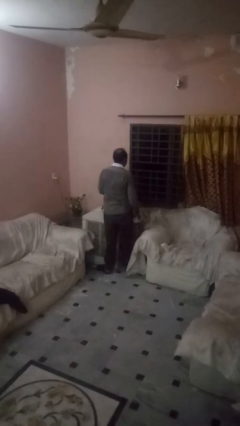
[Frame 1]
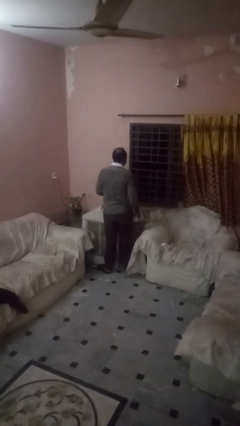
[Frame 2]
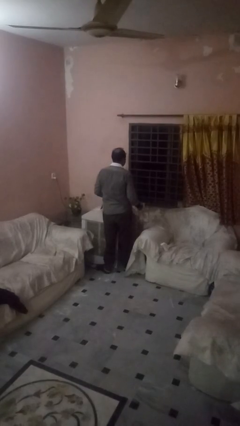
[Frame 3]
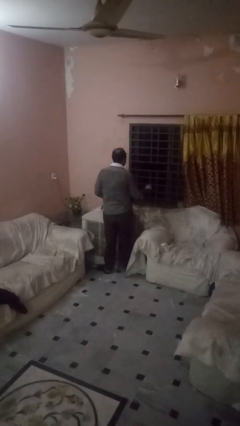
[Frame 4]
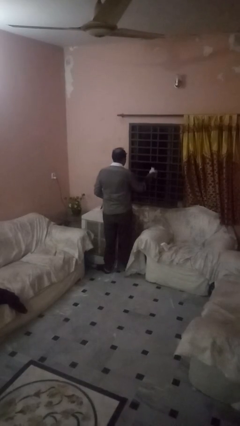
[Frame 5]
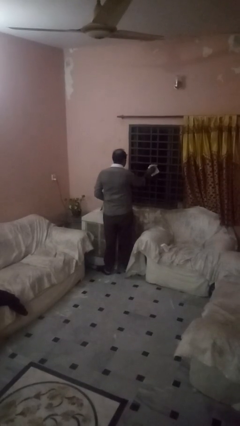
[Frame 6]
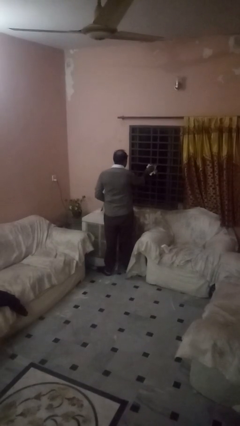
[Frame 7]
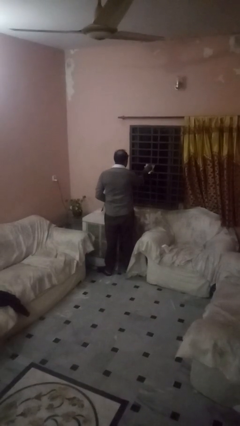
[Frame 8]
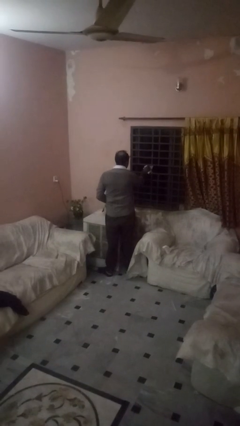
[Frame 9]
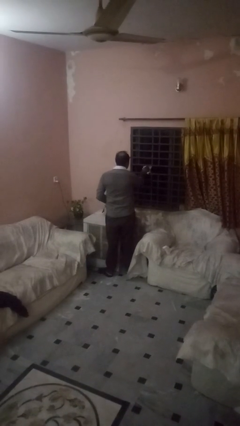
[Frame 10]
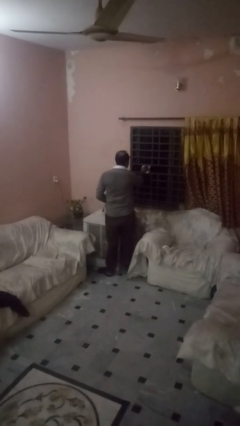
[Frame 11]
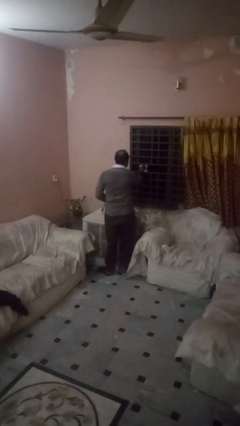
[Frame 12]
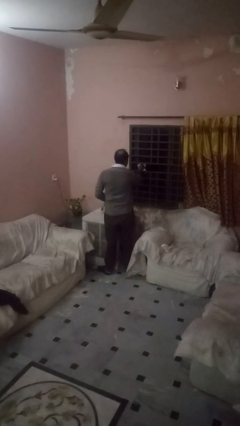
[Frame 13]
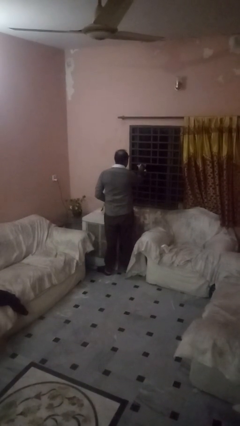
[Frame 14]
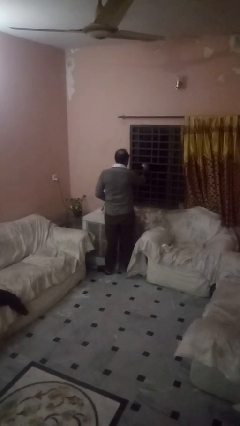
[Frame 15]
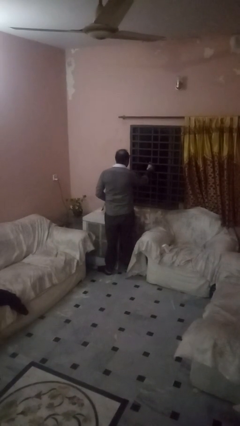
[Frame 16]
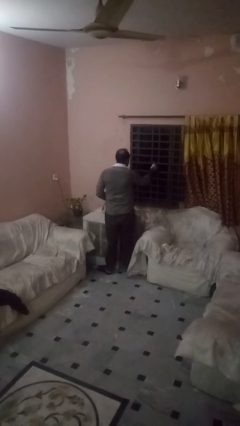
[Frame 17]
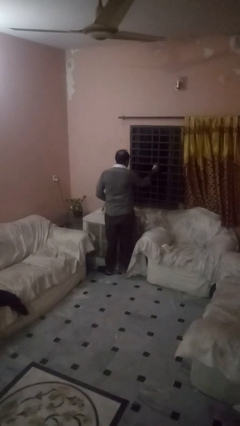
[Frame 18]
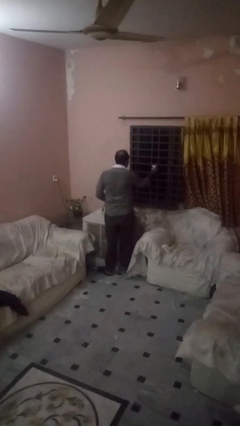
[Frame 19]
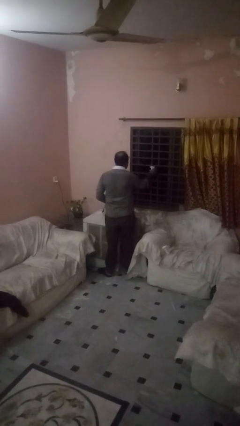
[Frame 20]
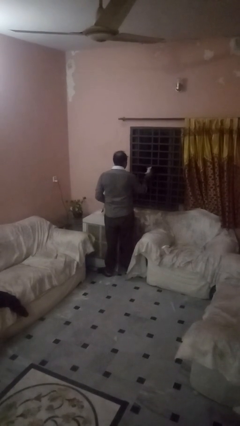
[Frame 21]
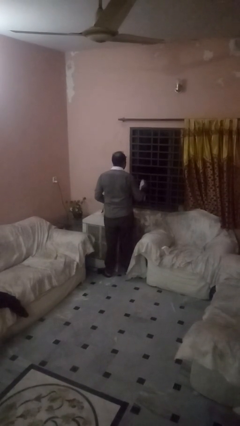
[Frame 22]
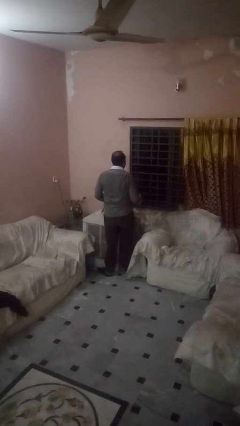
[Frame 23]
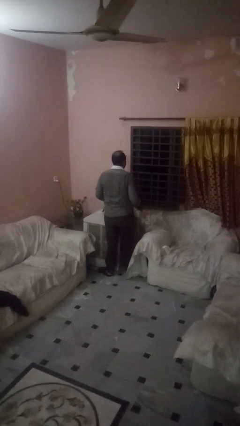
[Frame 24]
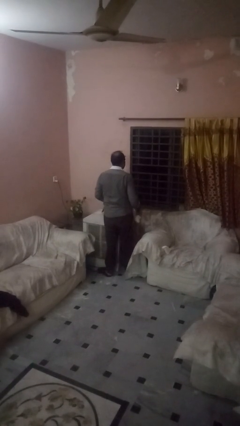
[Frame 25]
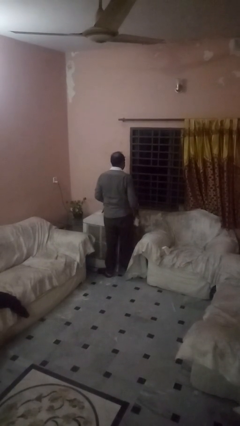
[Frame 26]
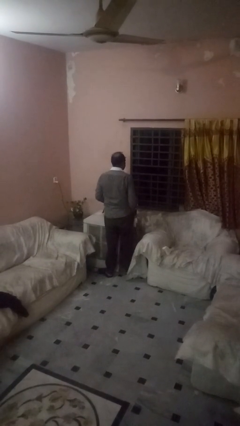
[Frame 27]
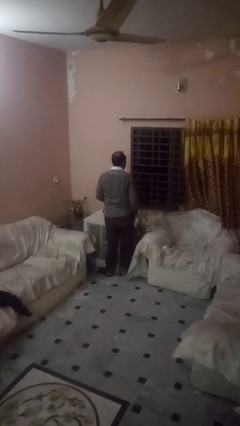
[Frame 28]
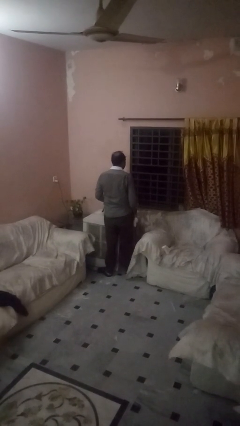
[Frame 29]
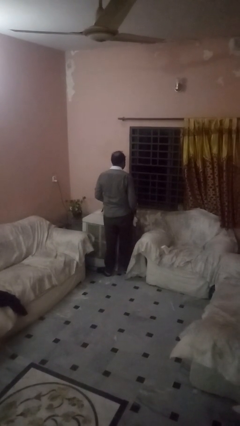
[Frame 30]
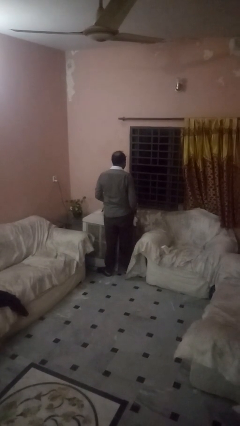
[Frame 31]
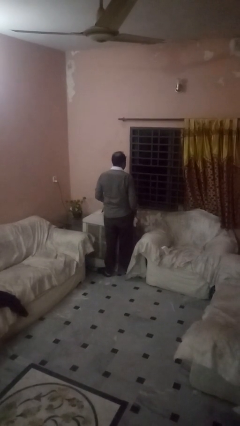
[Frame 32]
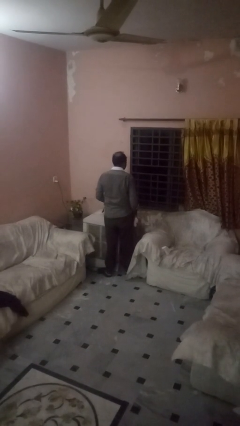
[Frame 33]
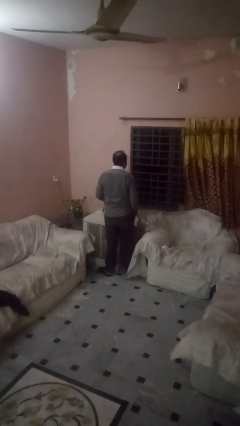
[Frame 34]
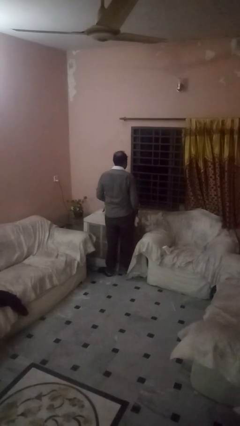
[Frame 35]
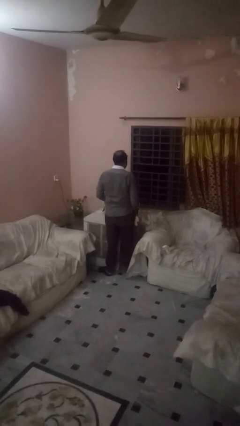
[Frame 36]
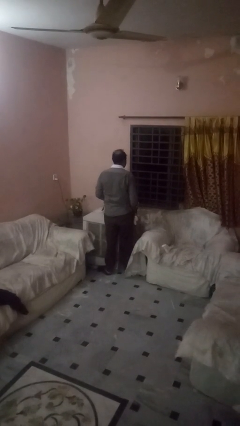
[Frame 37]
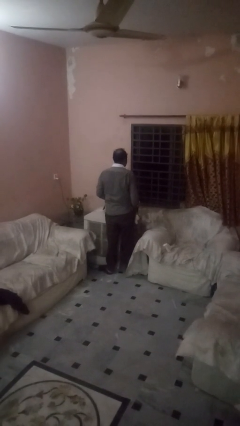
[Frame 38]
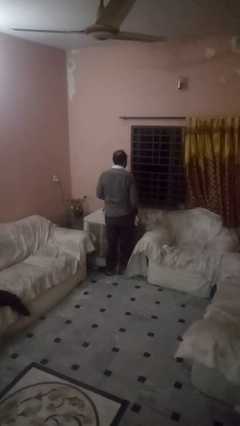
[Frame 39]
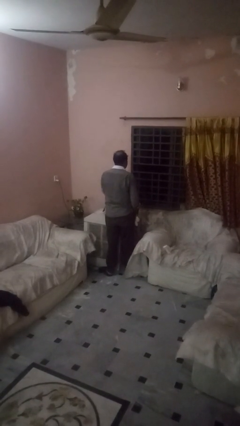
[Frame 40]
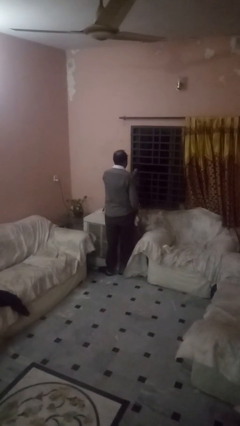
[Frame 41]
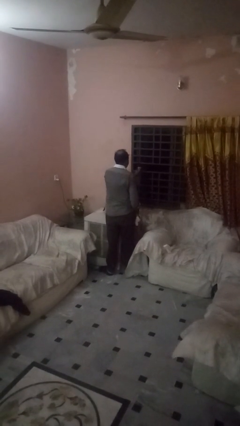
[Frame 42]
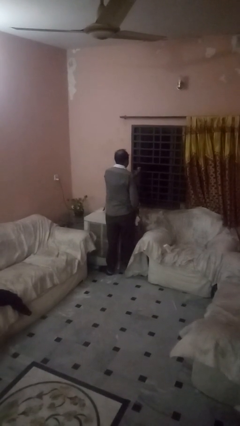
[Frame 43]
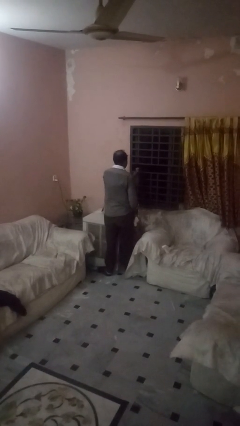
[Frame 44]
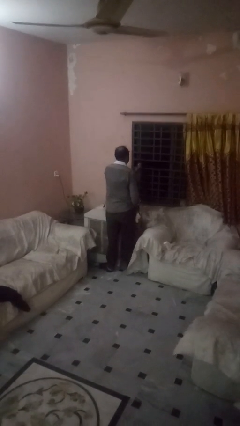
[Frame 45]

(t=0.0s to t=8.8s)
person washes window

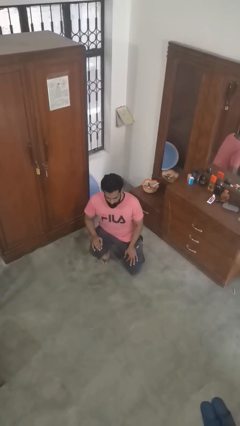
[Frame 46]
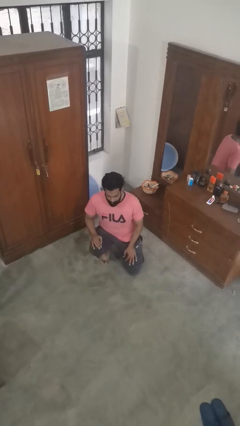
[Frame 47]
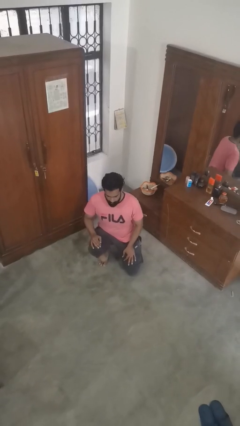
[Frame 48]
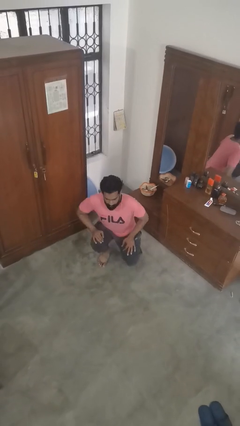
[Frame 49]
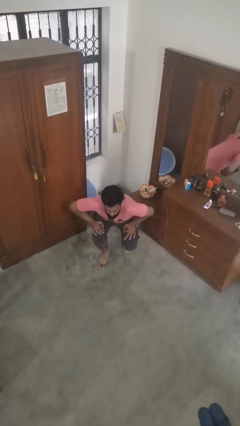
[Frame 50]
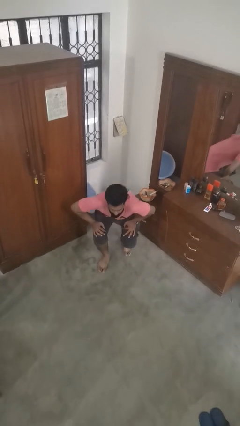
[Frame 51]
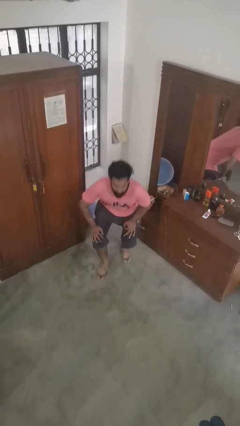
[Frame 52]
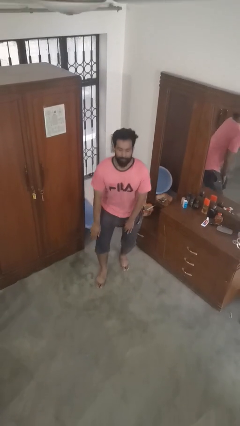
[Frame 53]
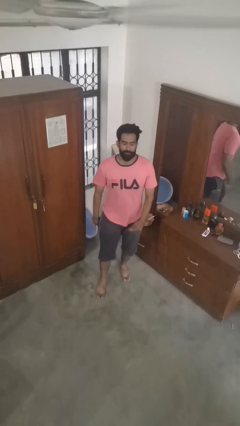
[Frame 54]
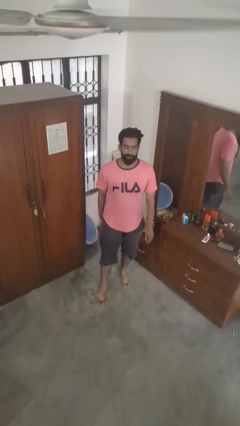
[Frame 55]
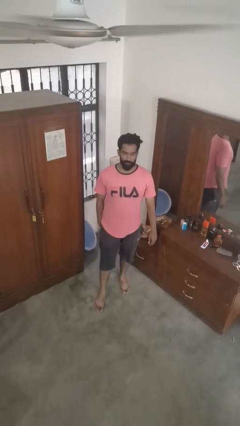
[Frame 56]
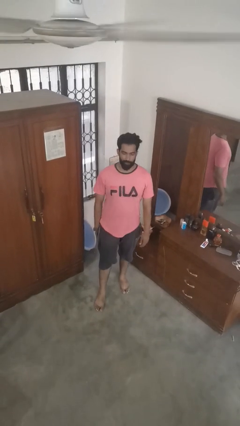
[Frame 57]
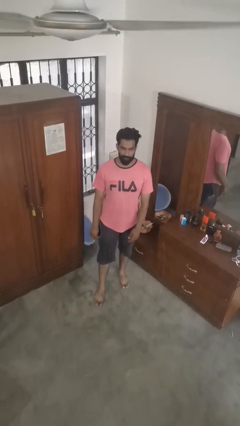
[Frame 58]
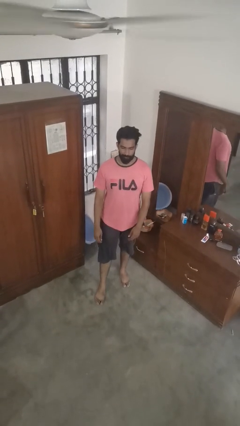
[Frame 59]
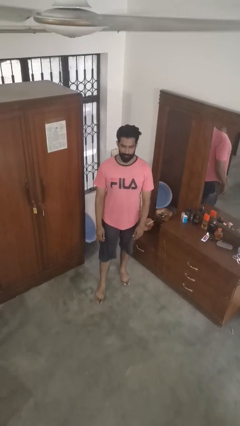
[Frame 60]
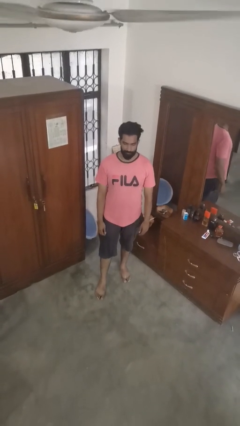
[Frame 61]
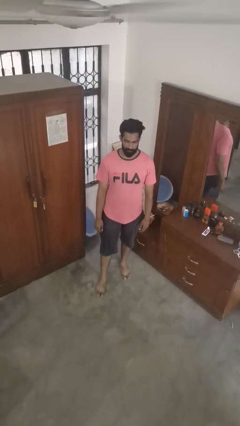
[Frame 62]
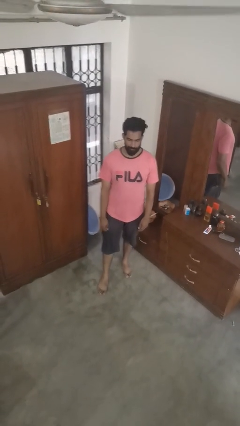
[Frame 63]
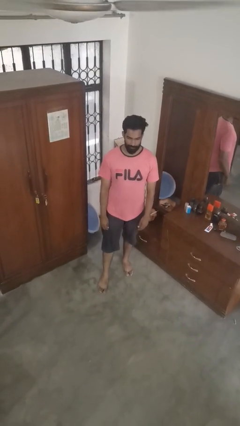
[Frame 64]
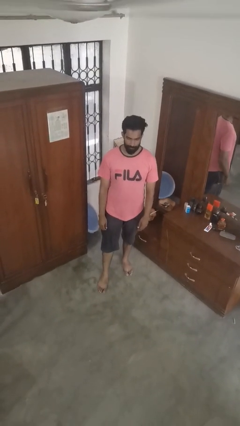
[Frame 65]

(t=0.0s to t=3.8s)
person stands up from floor

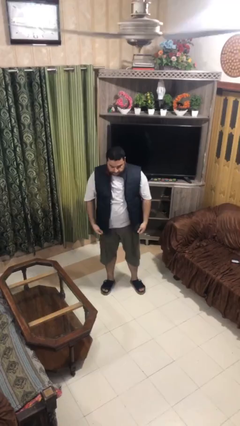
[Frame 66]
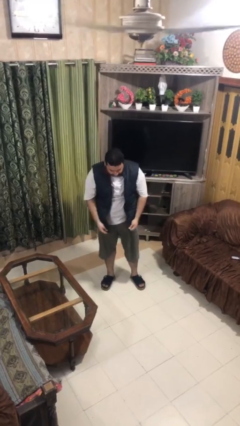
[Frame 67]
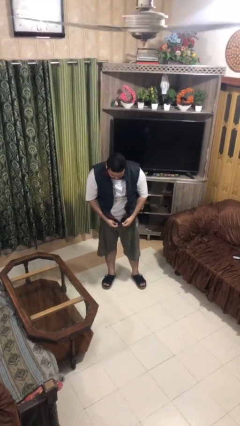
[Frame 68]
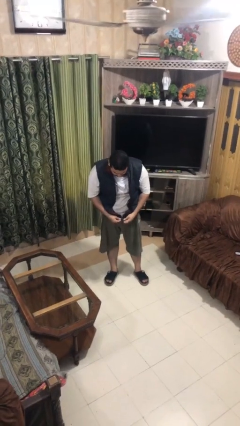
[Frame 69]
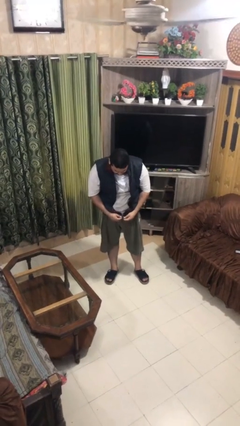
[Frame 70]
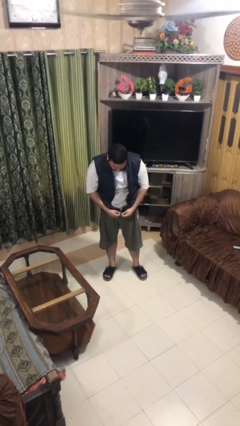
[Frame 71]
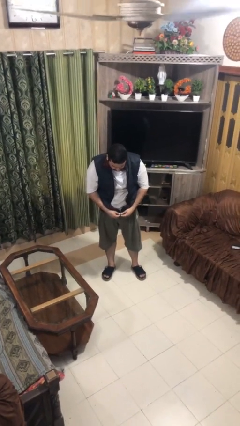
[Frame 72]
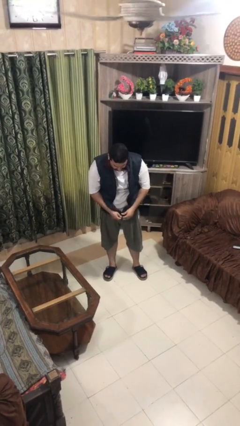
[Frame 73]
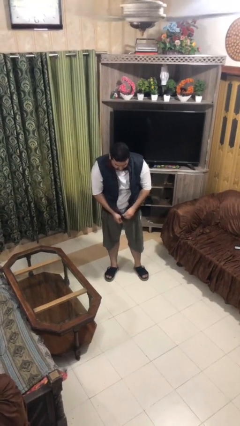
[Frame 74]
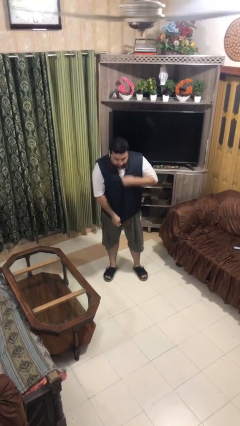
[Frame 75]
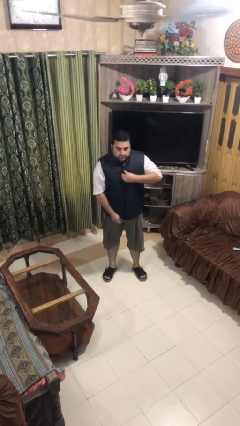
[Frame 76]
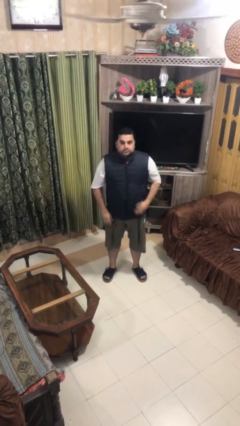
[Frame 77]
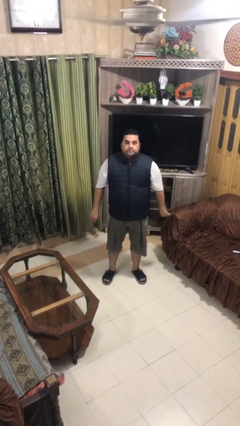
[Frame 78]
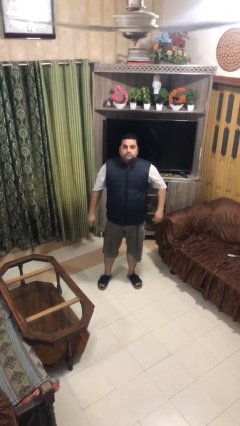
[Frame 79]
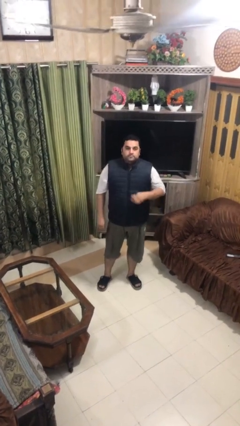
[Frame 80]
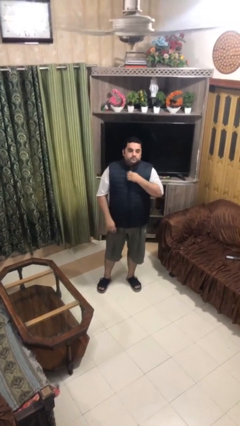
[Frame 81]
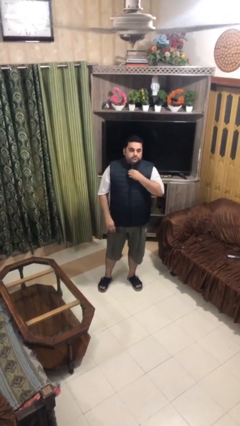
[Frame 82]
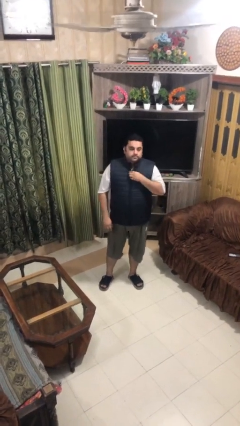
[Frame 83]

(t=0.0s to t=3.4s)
person zips up jacket

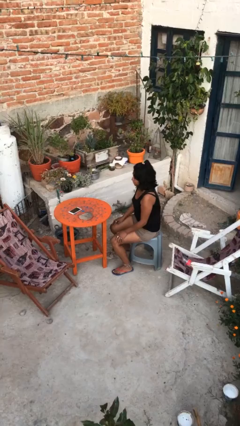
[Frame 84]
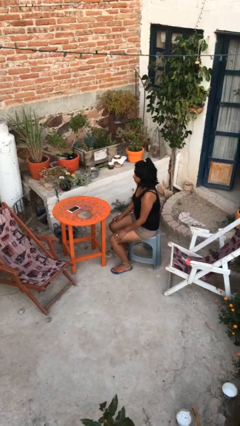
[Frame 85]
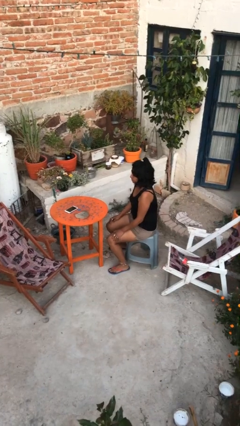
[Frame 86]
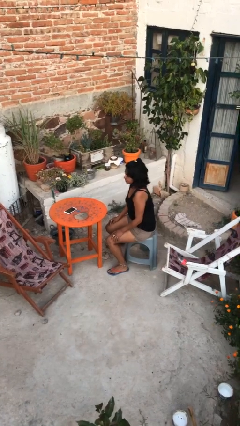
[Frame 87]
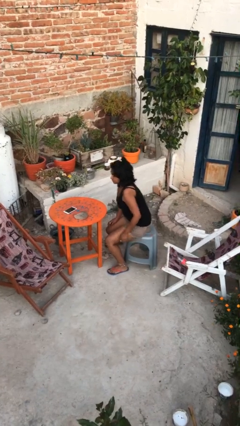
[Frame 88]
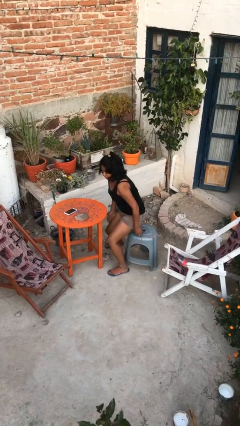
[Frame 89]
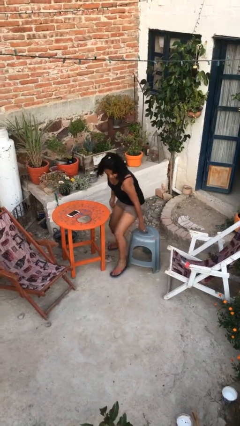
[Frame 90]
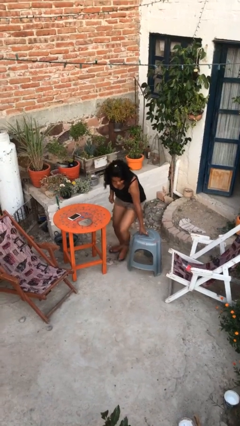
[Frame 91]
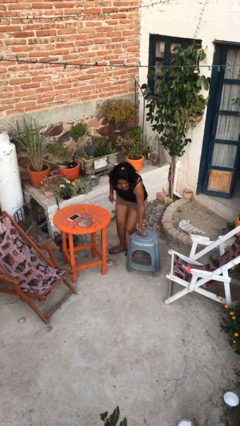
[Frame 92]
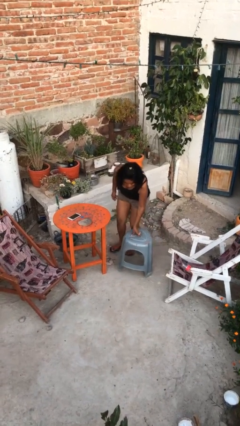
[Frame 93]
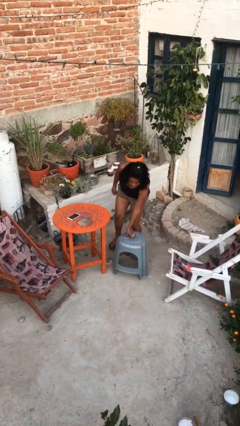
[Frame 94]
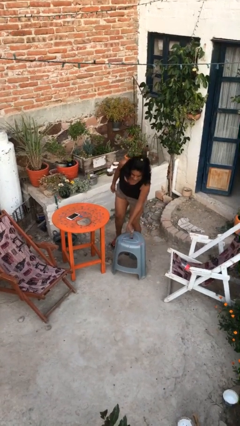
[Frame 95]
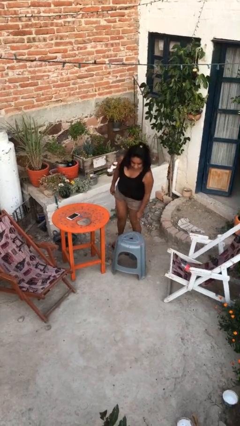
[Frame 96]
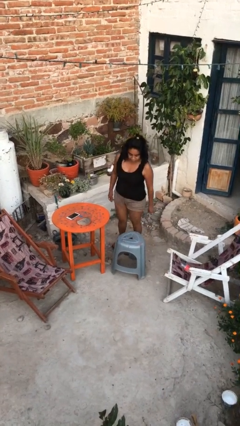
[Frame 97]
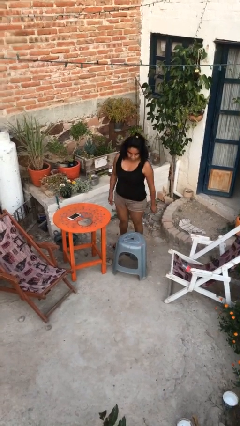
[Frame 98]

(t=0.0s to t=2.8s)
person stands up
